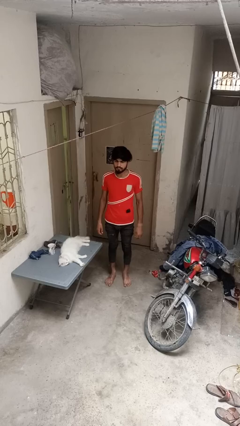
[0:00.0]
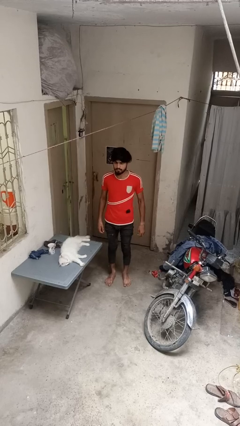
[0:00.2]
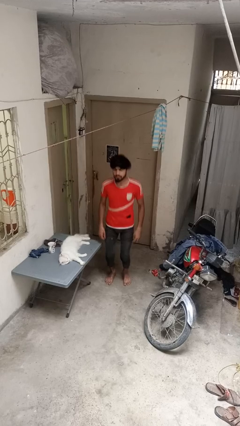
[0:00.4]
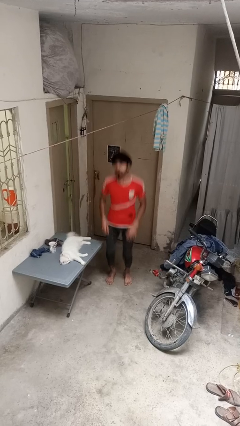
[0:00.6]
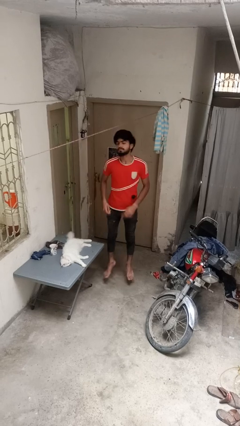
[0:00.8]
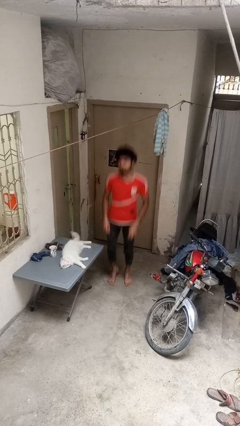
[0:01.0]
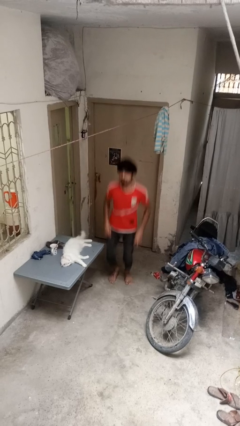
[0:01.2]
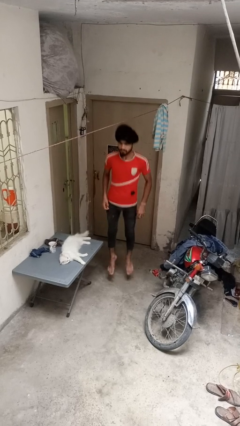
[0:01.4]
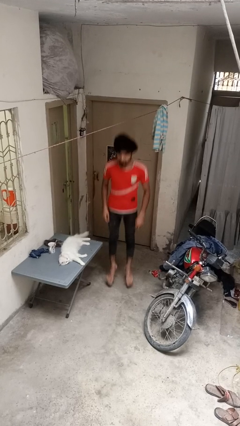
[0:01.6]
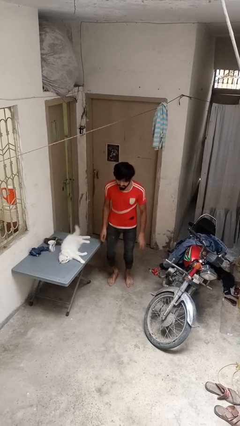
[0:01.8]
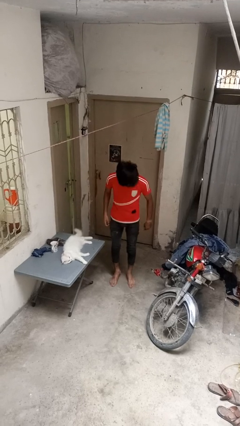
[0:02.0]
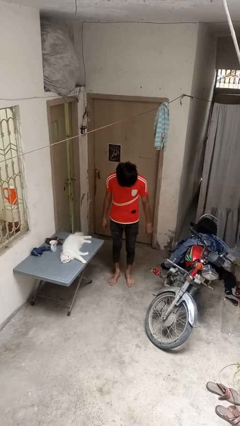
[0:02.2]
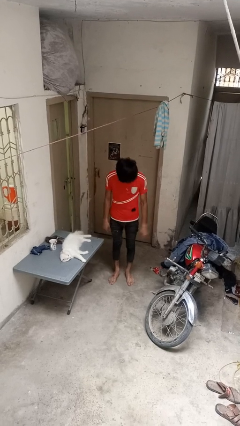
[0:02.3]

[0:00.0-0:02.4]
person jumps

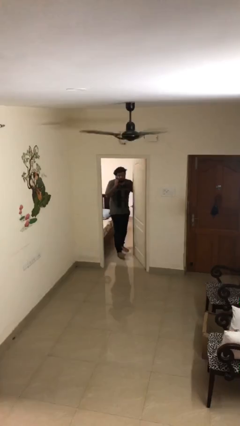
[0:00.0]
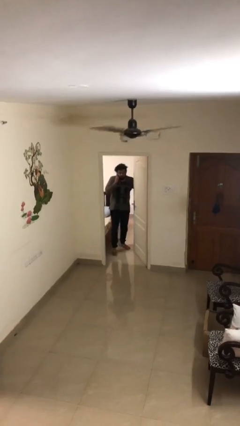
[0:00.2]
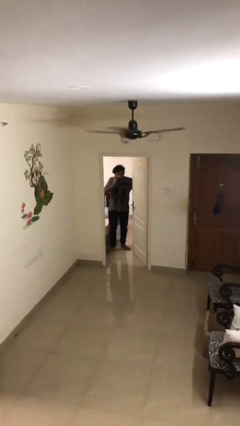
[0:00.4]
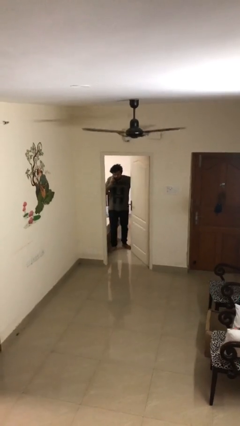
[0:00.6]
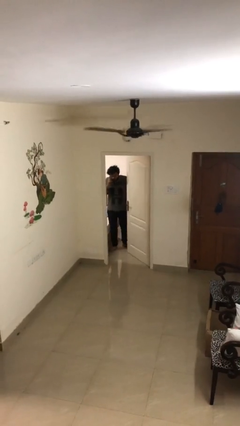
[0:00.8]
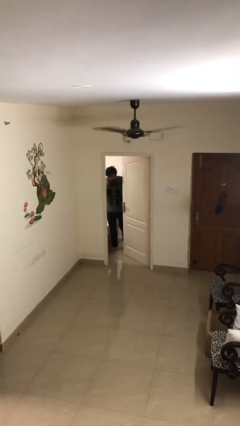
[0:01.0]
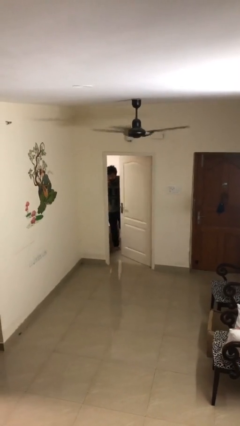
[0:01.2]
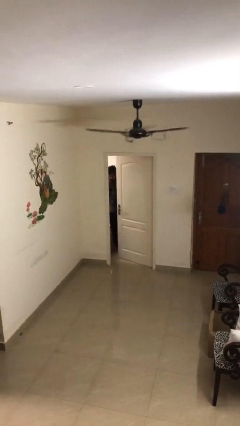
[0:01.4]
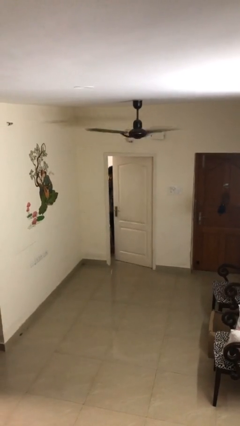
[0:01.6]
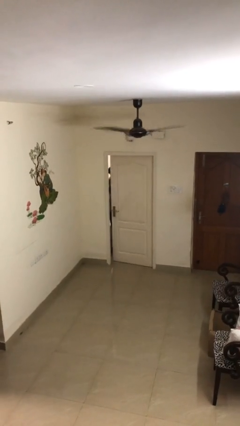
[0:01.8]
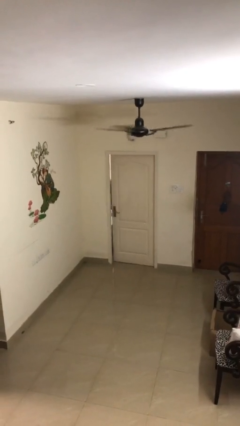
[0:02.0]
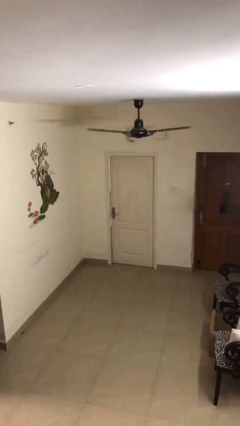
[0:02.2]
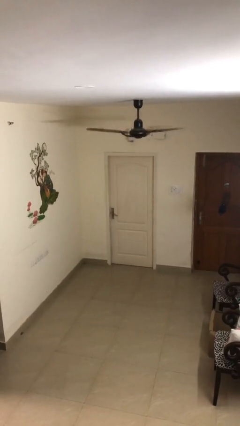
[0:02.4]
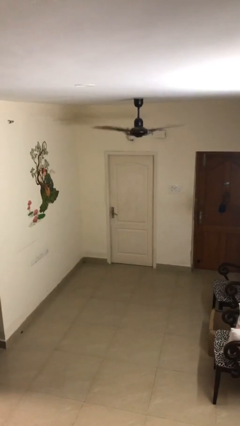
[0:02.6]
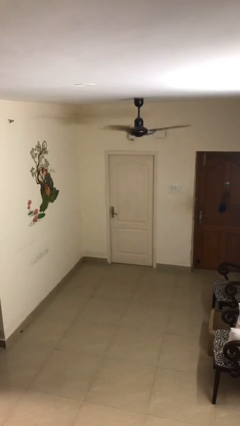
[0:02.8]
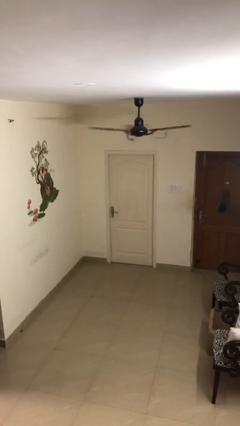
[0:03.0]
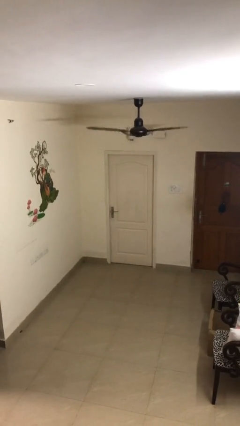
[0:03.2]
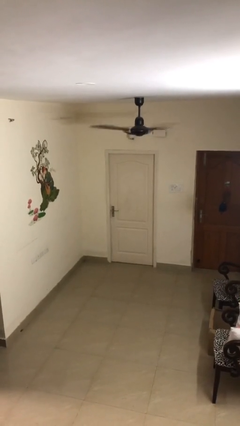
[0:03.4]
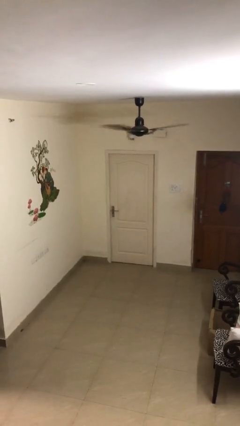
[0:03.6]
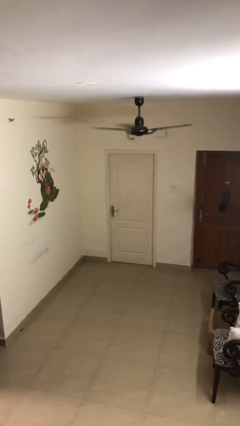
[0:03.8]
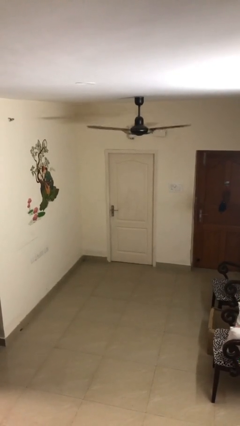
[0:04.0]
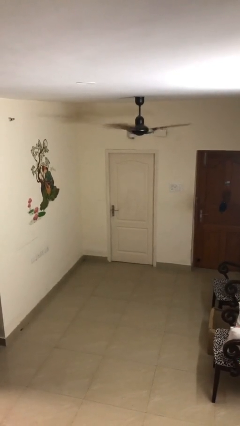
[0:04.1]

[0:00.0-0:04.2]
person closes facility door

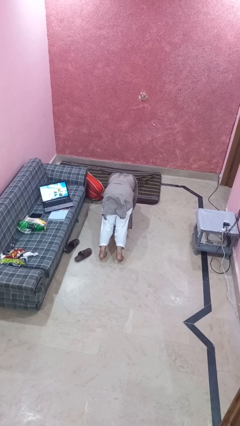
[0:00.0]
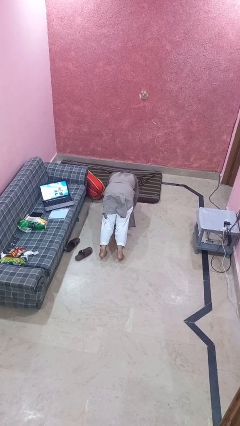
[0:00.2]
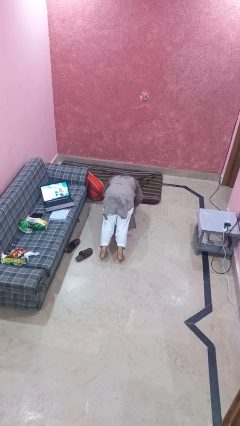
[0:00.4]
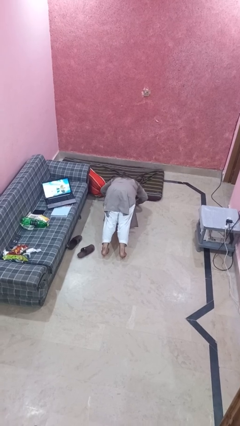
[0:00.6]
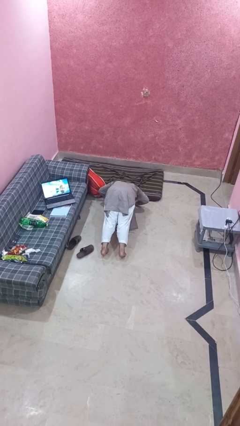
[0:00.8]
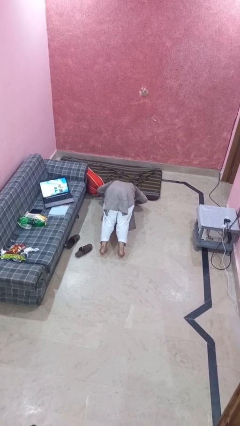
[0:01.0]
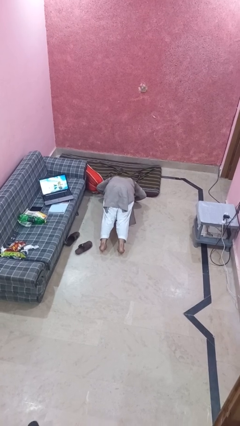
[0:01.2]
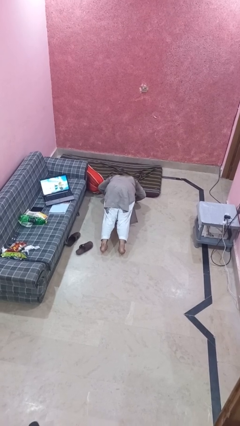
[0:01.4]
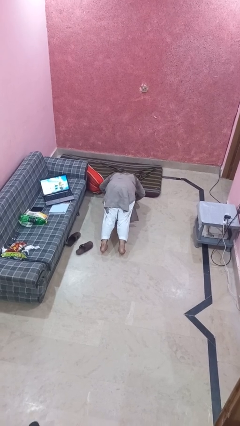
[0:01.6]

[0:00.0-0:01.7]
person exercises with pushup

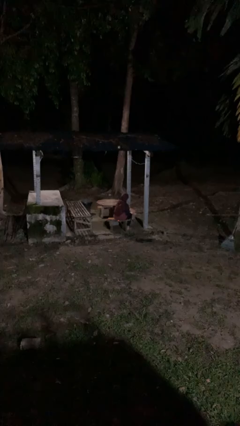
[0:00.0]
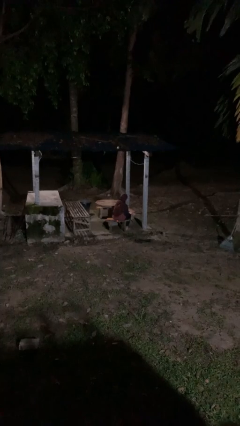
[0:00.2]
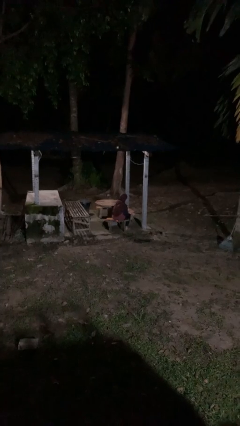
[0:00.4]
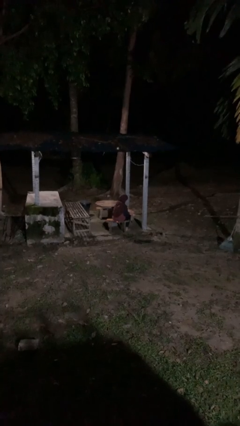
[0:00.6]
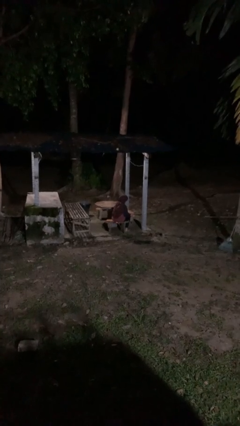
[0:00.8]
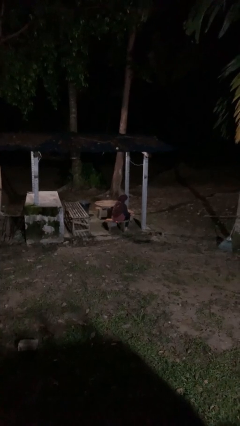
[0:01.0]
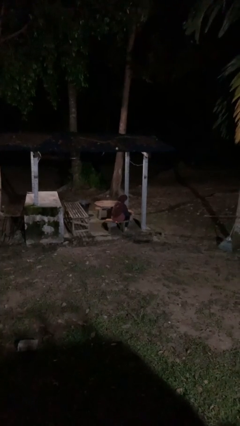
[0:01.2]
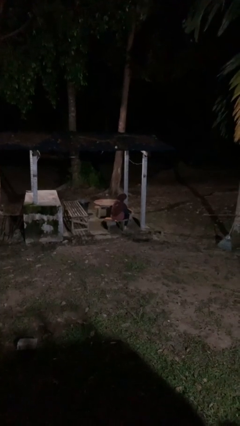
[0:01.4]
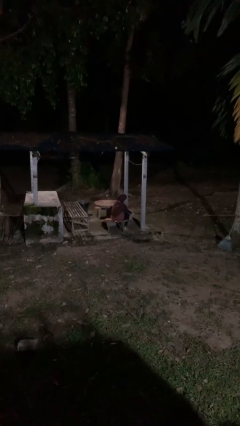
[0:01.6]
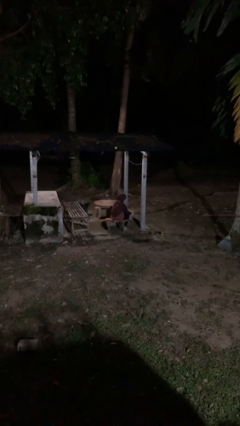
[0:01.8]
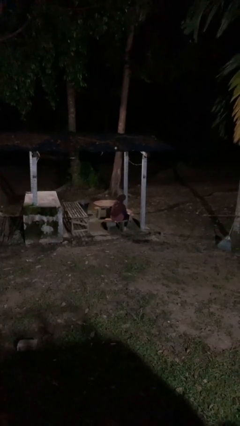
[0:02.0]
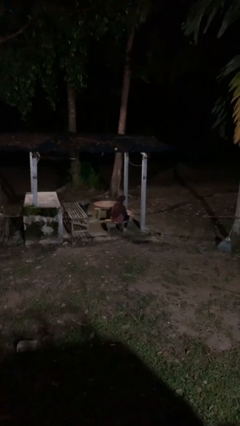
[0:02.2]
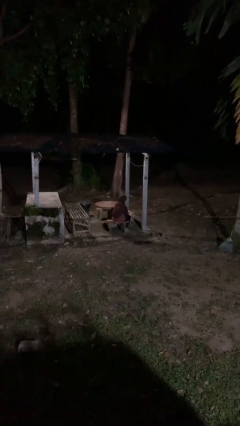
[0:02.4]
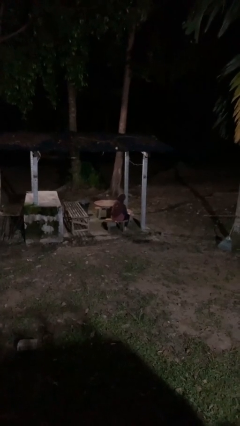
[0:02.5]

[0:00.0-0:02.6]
person rubs foot

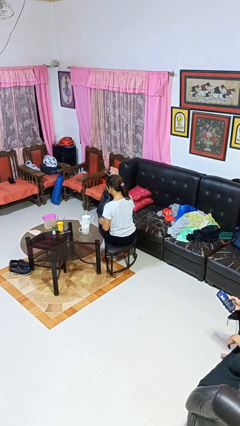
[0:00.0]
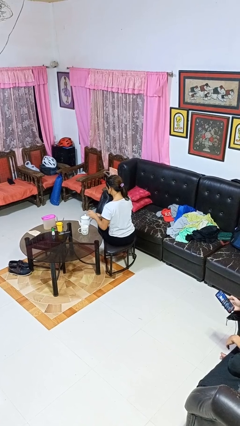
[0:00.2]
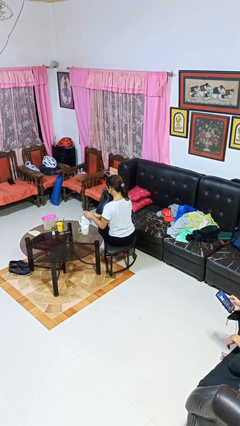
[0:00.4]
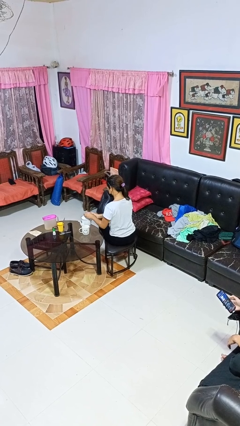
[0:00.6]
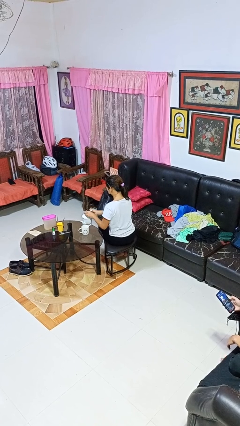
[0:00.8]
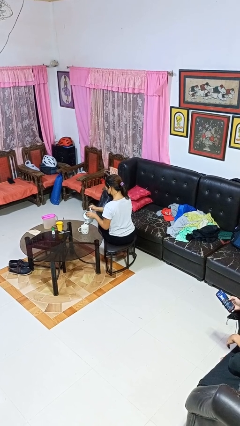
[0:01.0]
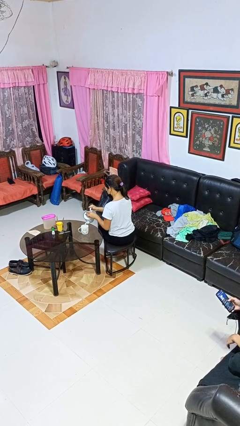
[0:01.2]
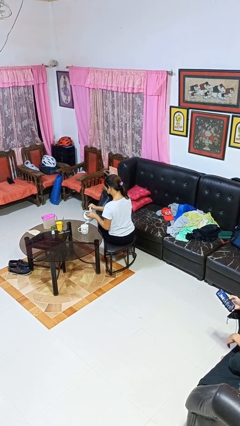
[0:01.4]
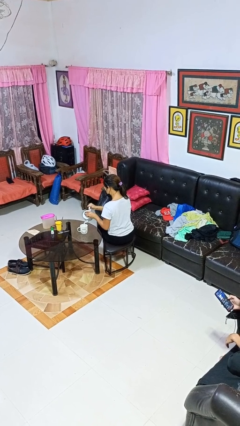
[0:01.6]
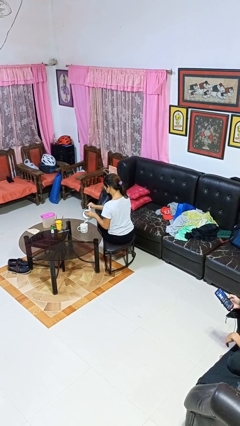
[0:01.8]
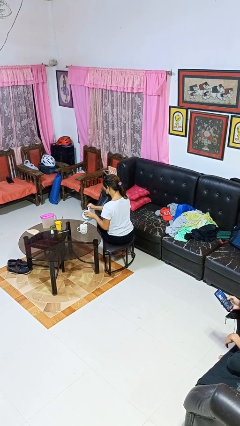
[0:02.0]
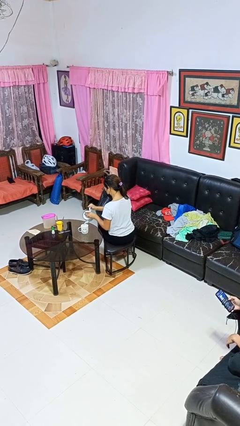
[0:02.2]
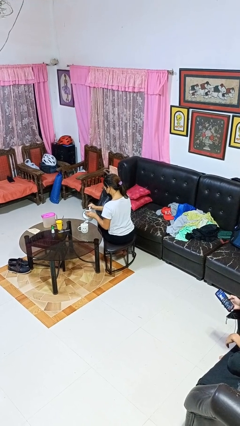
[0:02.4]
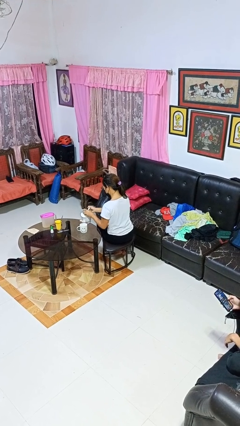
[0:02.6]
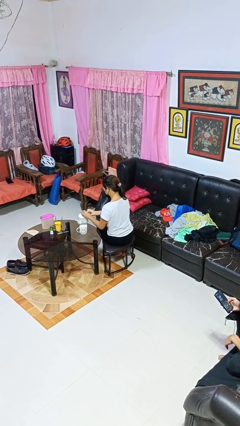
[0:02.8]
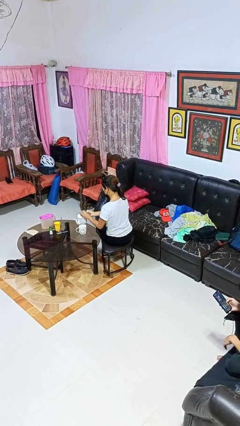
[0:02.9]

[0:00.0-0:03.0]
person pours coffee into mug

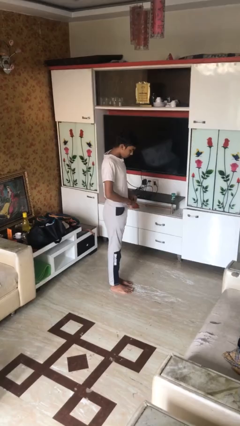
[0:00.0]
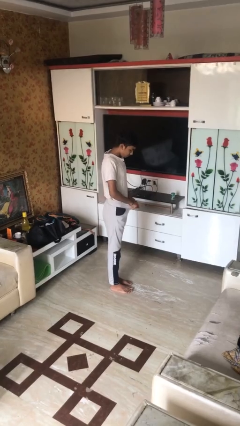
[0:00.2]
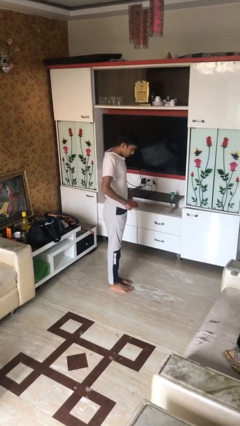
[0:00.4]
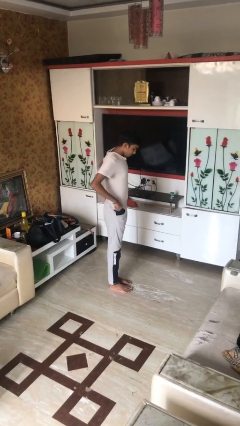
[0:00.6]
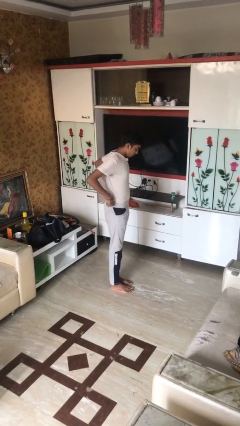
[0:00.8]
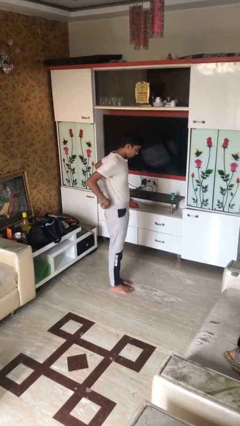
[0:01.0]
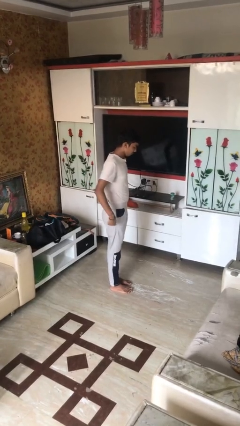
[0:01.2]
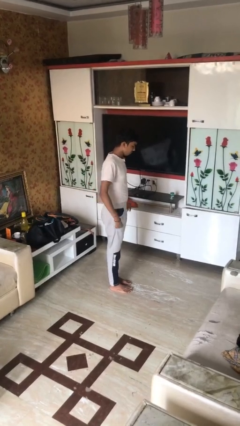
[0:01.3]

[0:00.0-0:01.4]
person hikes up pants

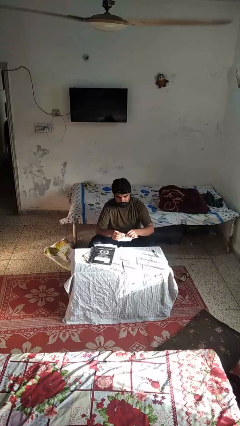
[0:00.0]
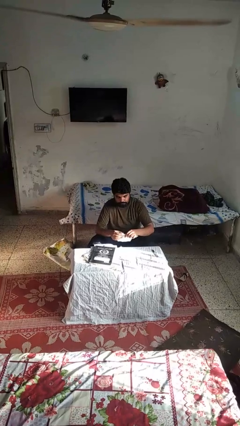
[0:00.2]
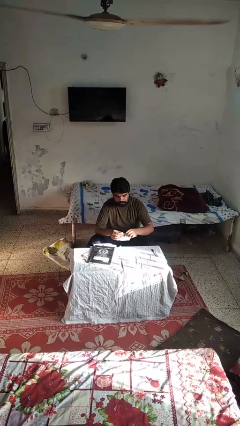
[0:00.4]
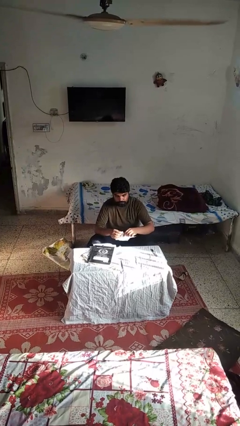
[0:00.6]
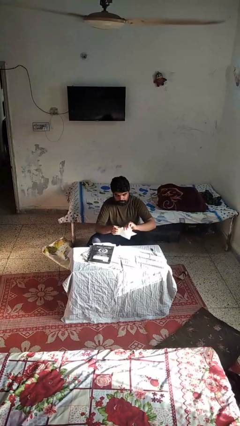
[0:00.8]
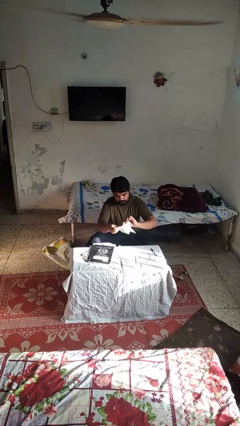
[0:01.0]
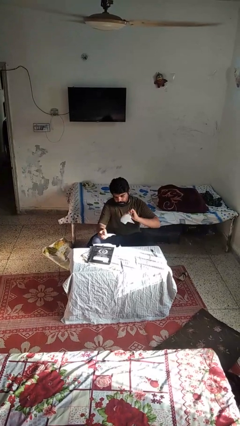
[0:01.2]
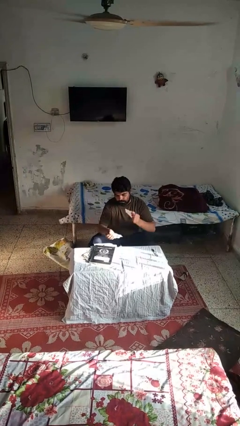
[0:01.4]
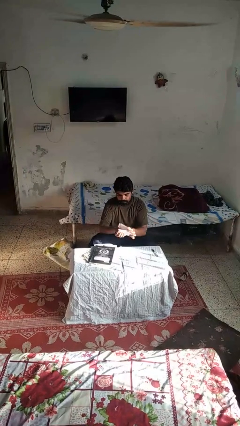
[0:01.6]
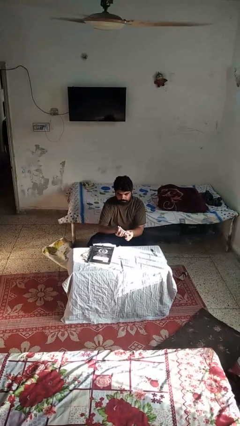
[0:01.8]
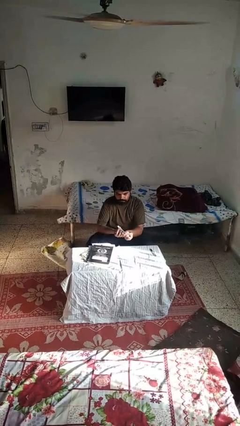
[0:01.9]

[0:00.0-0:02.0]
person tears paper
